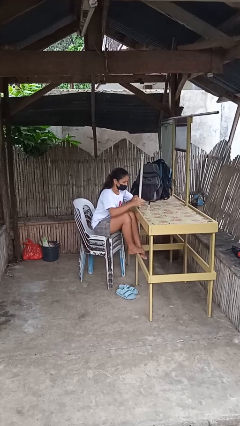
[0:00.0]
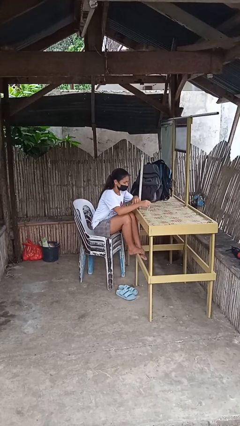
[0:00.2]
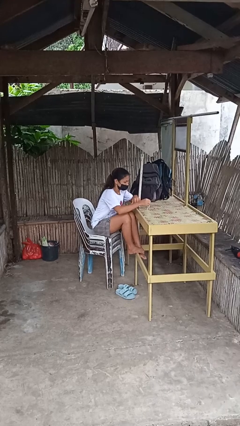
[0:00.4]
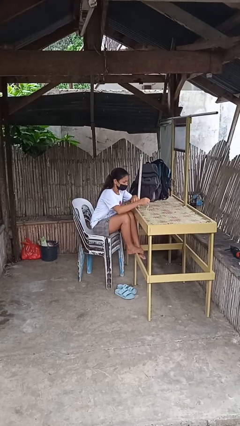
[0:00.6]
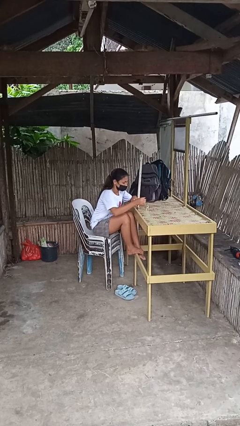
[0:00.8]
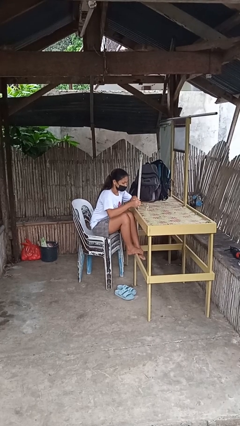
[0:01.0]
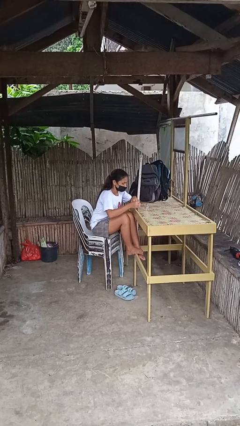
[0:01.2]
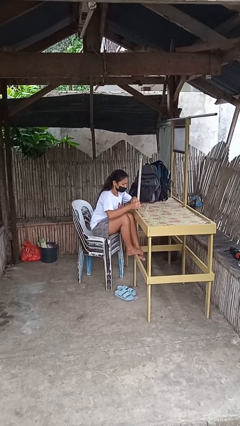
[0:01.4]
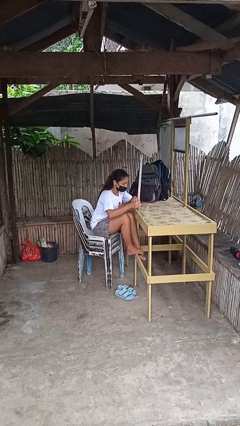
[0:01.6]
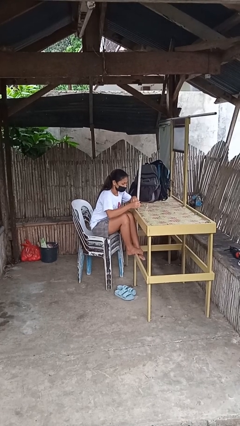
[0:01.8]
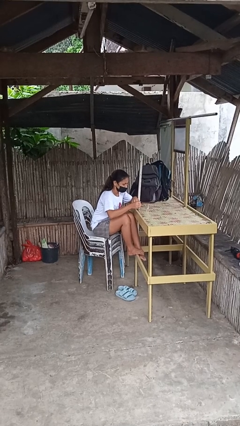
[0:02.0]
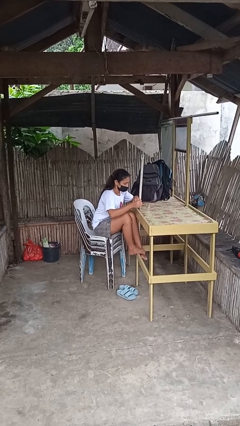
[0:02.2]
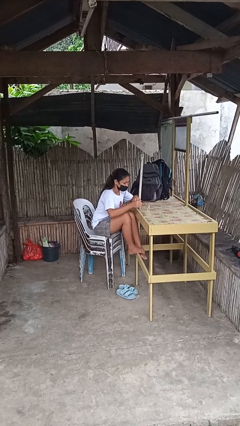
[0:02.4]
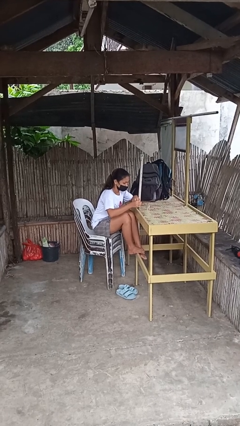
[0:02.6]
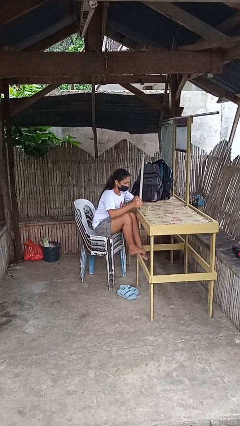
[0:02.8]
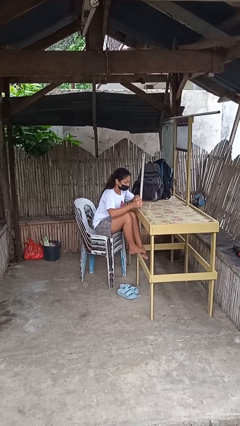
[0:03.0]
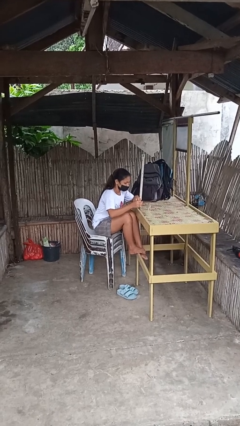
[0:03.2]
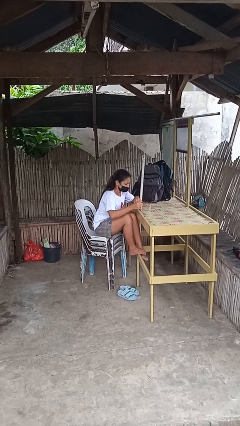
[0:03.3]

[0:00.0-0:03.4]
person paints fingernails

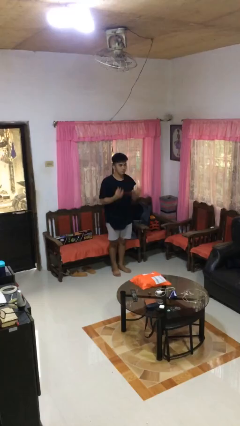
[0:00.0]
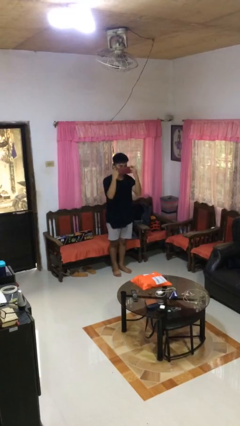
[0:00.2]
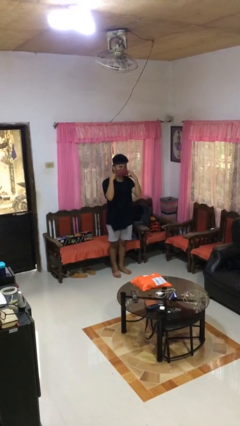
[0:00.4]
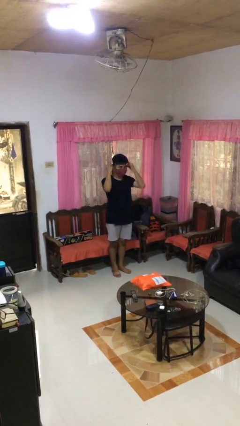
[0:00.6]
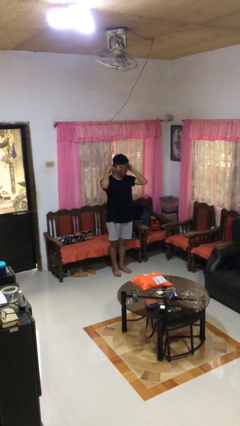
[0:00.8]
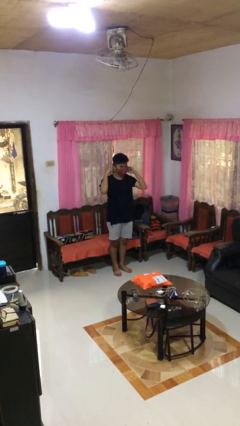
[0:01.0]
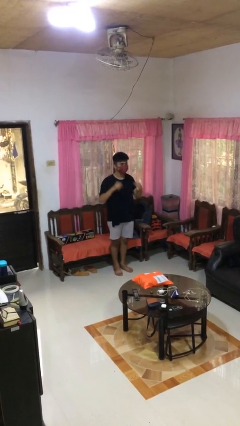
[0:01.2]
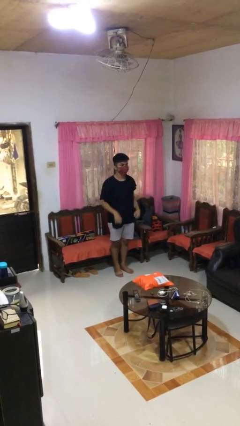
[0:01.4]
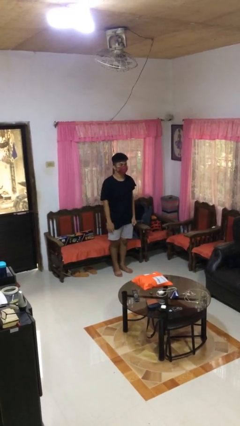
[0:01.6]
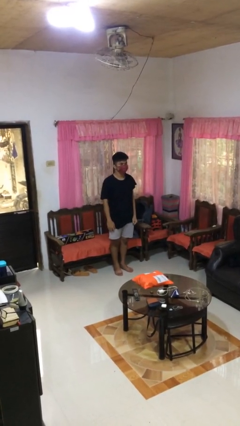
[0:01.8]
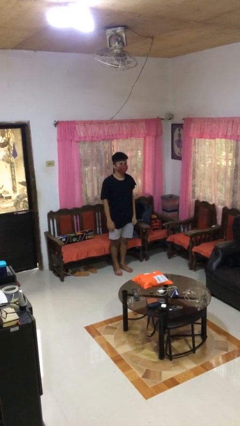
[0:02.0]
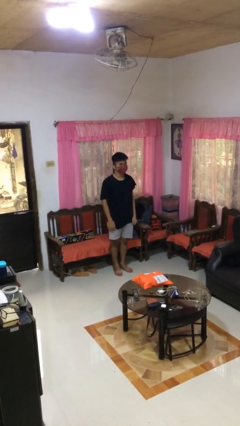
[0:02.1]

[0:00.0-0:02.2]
person puts on facemask

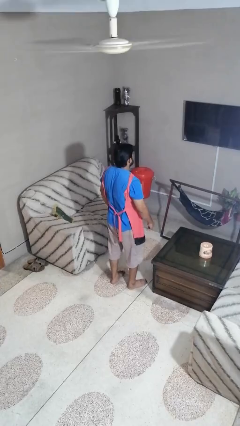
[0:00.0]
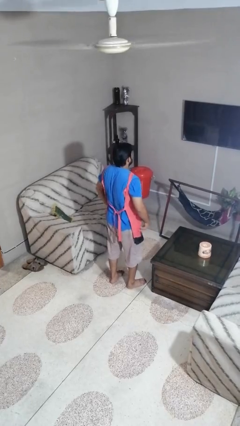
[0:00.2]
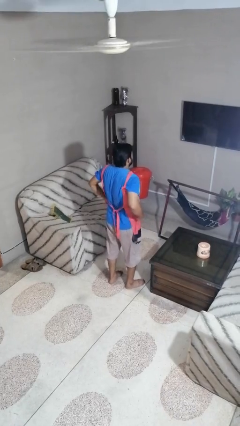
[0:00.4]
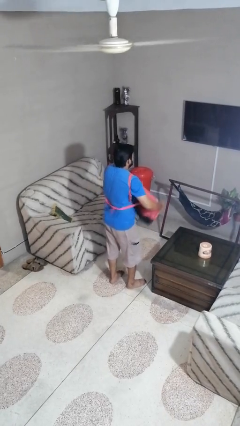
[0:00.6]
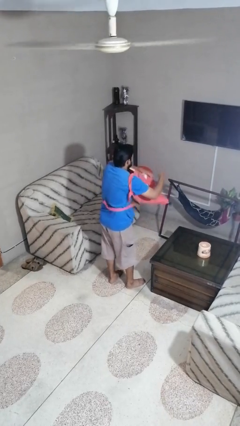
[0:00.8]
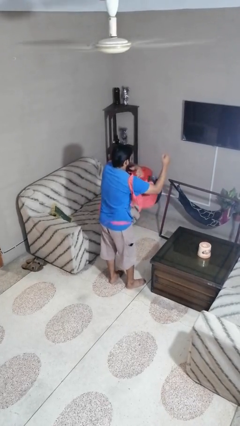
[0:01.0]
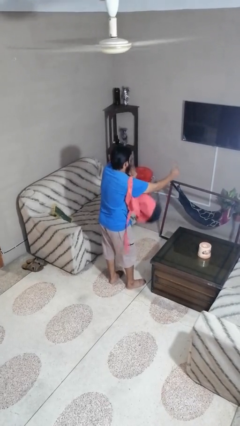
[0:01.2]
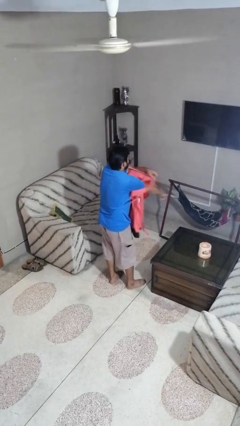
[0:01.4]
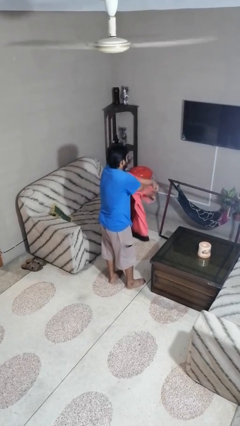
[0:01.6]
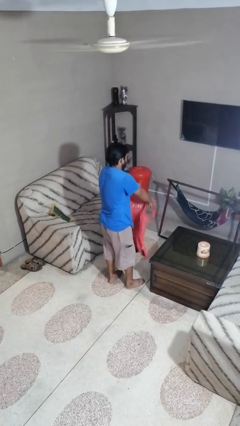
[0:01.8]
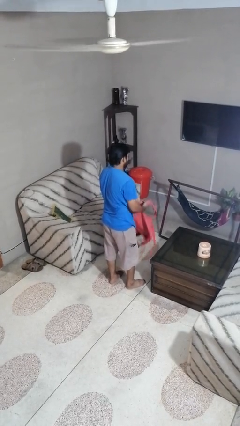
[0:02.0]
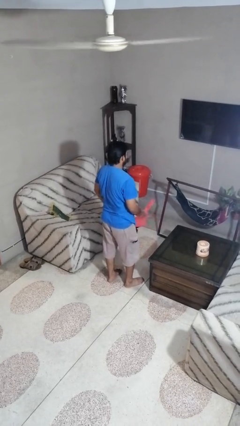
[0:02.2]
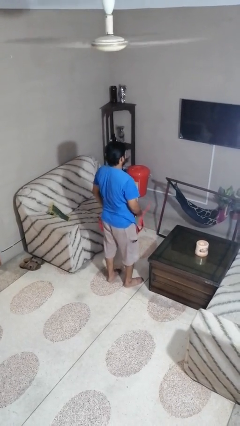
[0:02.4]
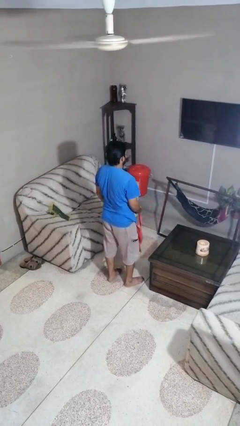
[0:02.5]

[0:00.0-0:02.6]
person takes off apron

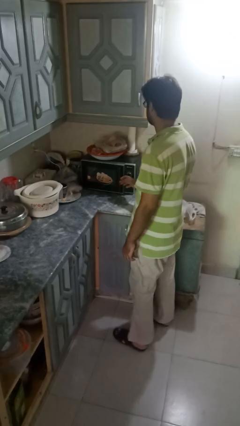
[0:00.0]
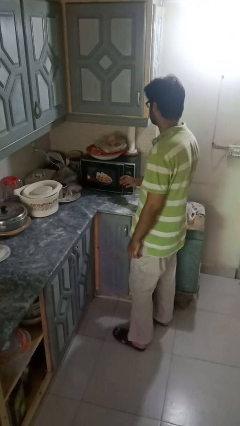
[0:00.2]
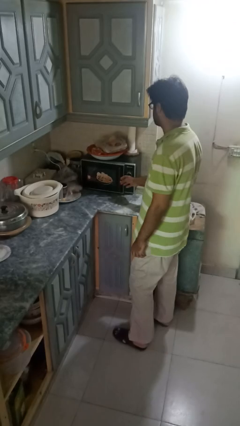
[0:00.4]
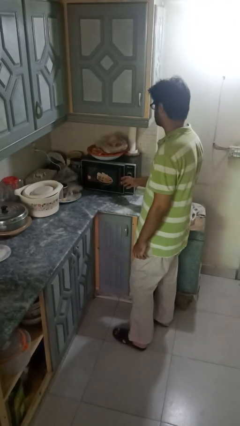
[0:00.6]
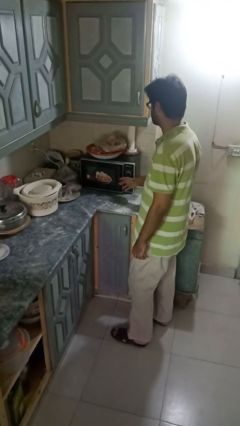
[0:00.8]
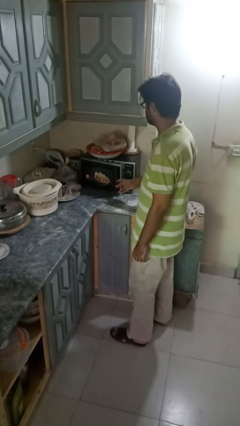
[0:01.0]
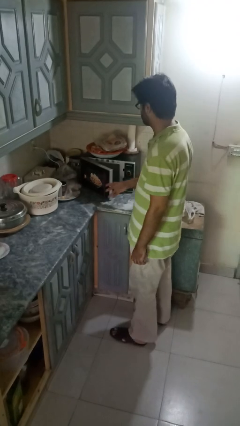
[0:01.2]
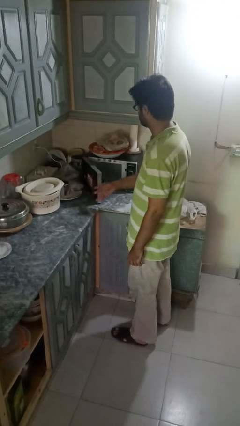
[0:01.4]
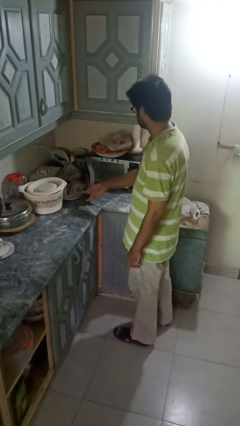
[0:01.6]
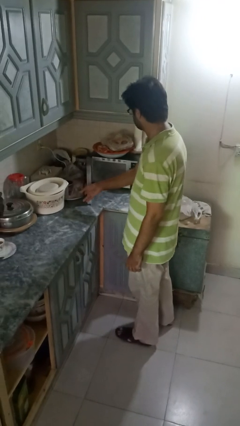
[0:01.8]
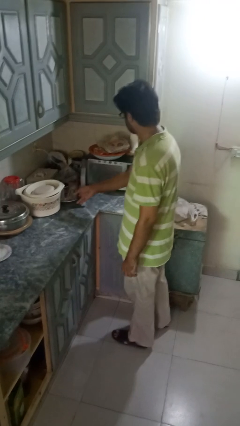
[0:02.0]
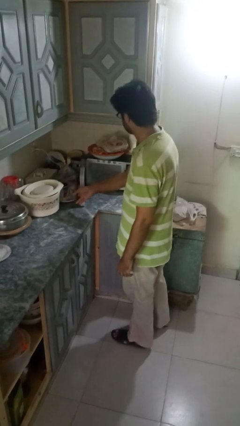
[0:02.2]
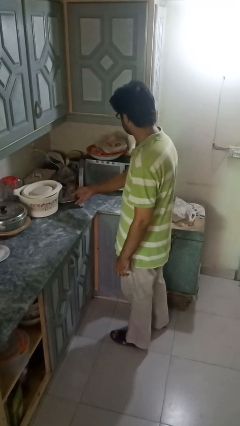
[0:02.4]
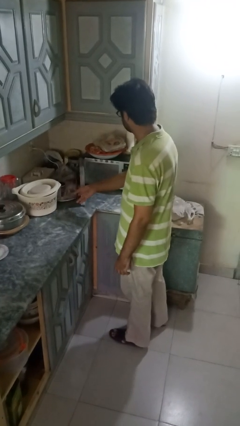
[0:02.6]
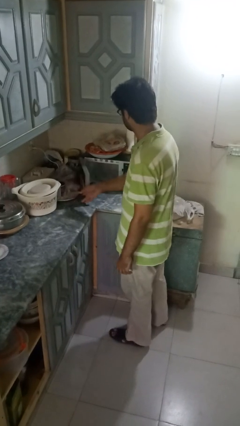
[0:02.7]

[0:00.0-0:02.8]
person opens microwave

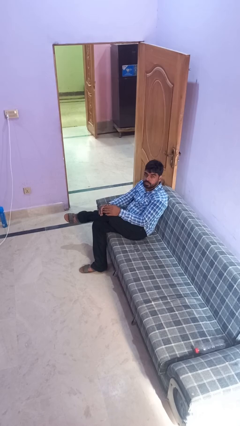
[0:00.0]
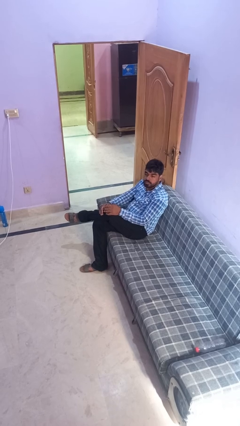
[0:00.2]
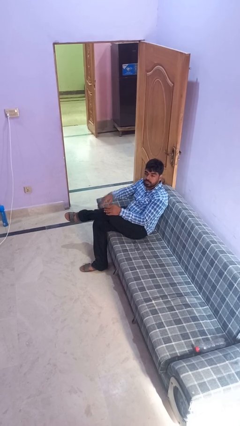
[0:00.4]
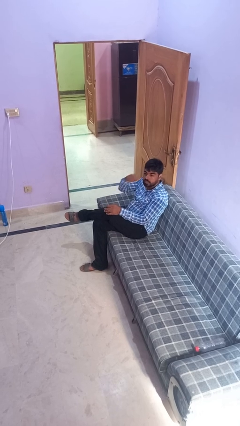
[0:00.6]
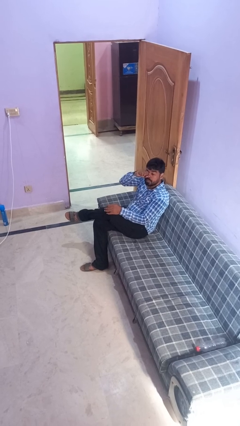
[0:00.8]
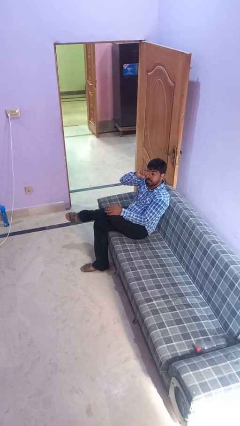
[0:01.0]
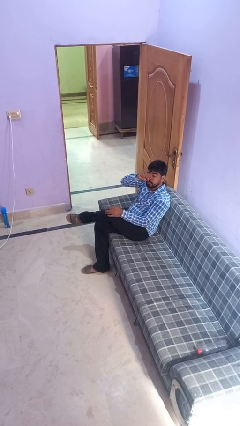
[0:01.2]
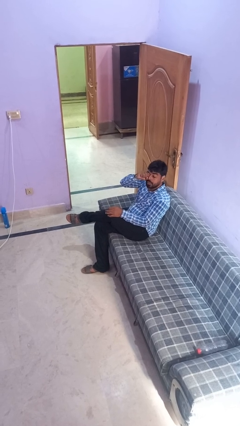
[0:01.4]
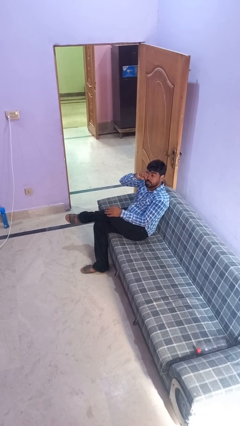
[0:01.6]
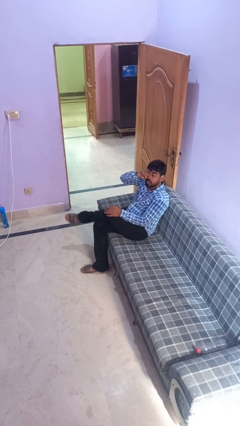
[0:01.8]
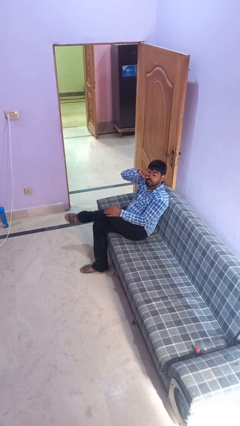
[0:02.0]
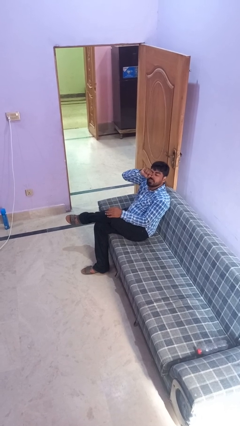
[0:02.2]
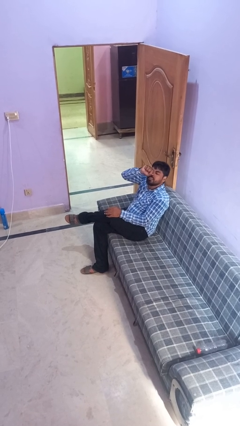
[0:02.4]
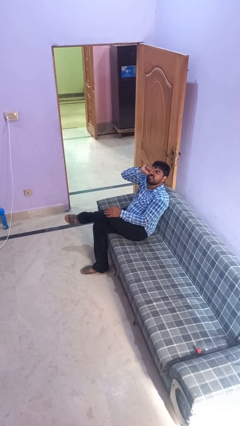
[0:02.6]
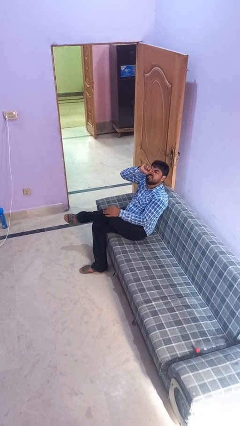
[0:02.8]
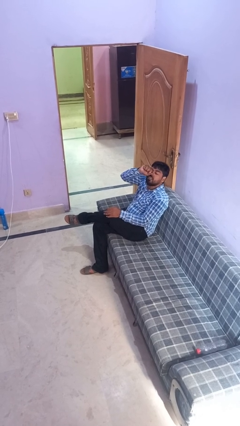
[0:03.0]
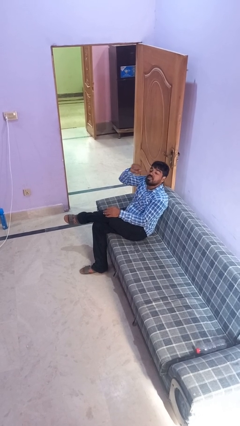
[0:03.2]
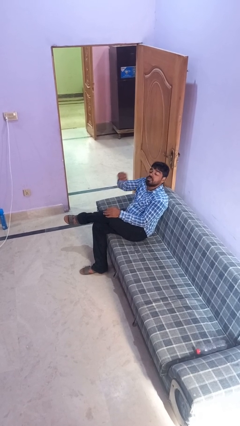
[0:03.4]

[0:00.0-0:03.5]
person rubs eyes

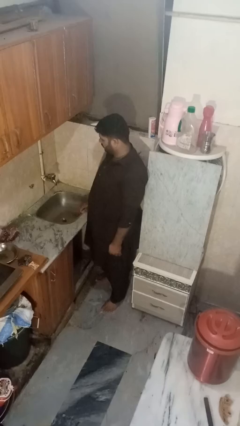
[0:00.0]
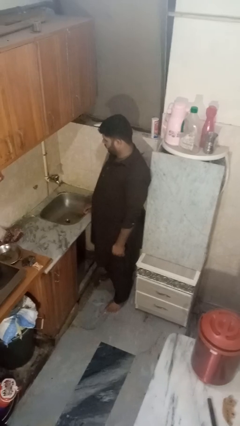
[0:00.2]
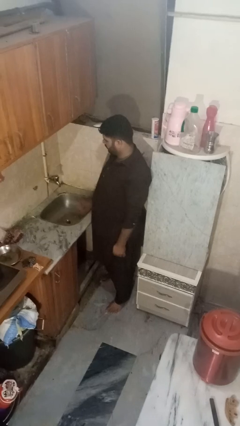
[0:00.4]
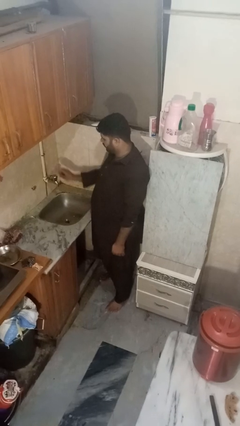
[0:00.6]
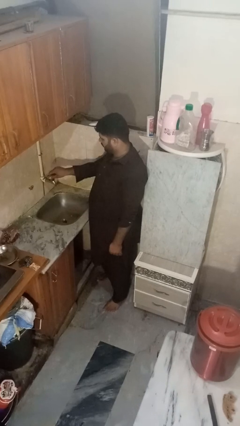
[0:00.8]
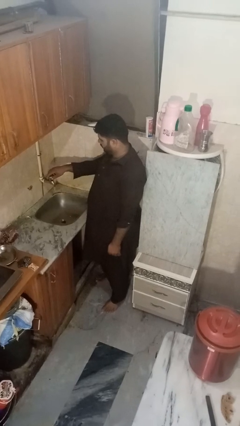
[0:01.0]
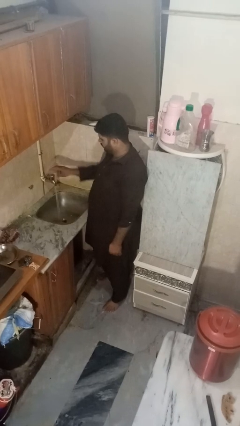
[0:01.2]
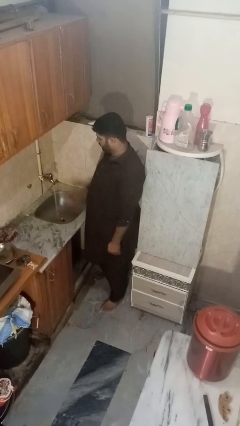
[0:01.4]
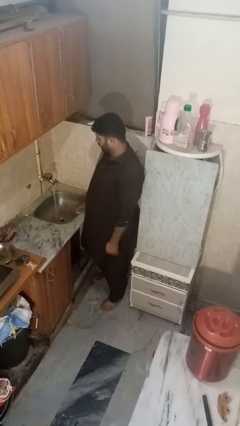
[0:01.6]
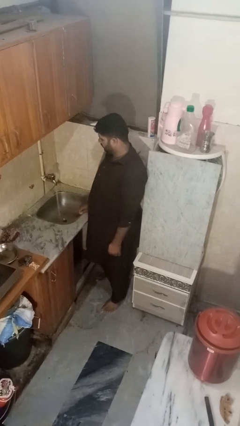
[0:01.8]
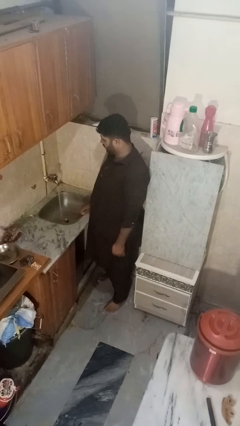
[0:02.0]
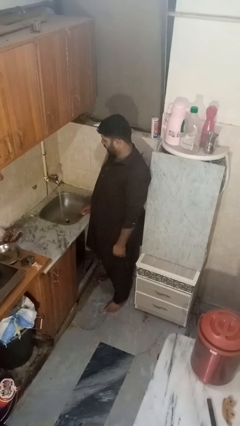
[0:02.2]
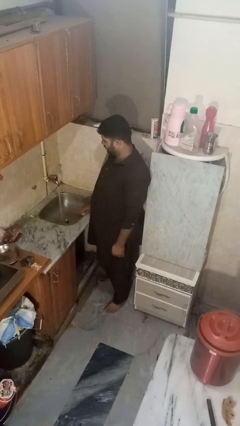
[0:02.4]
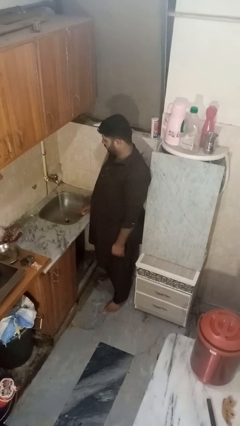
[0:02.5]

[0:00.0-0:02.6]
person turns on faucet

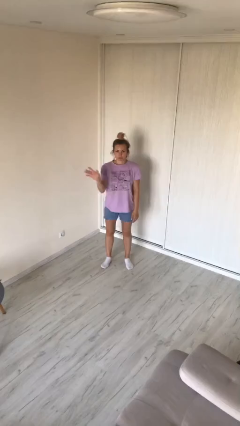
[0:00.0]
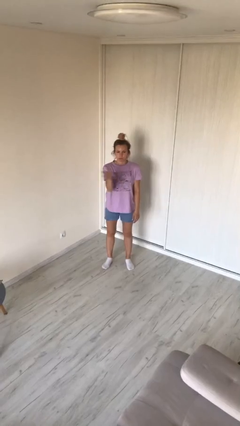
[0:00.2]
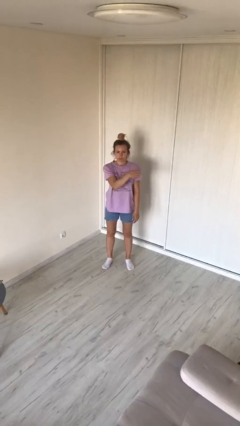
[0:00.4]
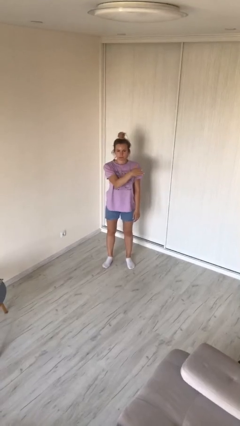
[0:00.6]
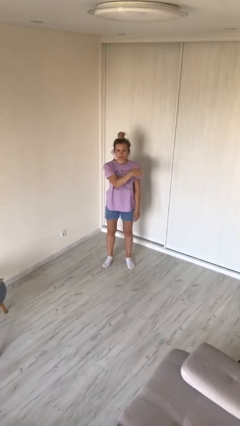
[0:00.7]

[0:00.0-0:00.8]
person gestures swipe left
